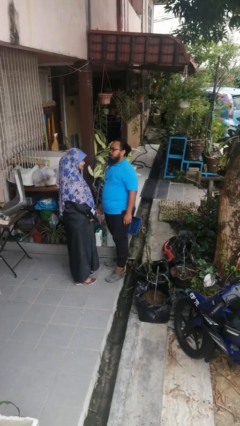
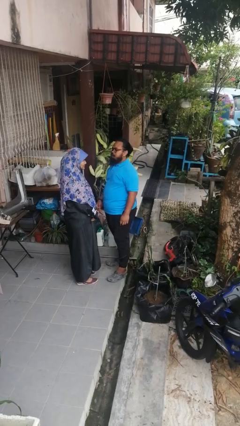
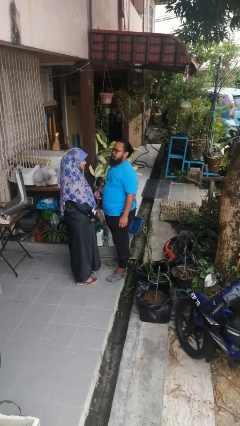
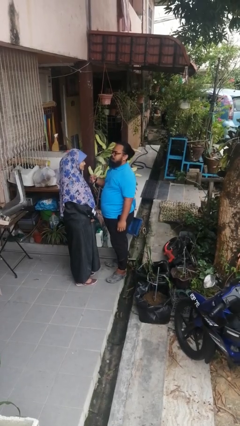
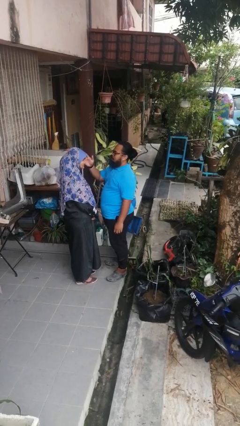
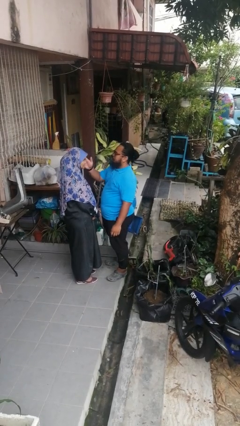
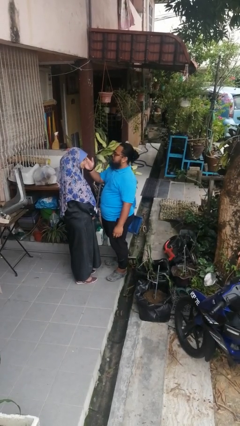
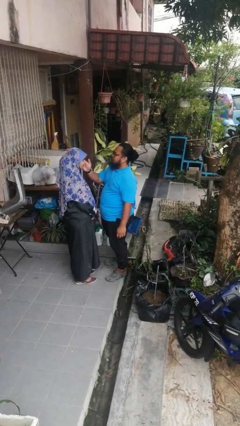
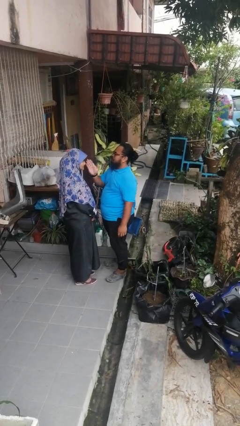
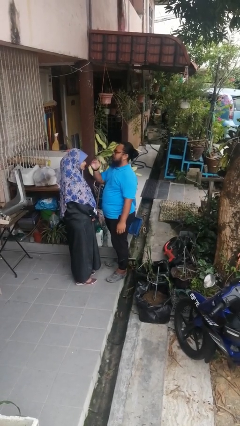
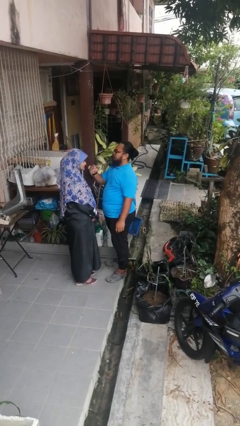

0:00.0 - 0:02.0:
person touches face of person

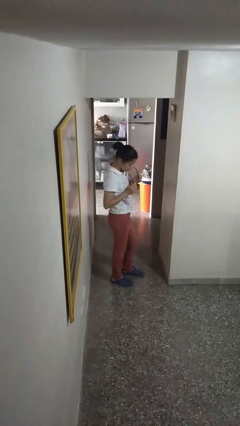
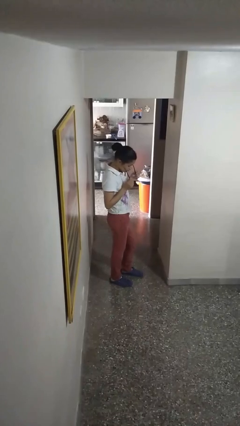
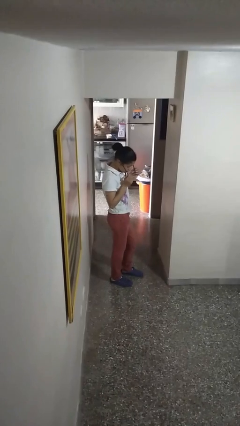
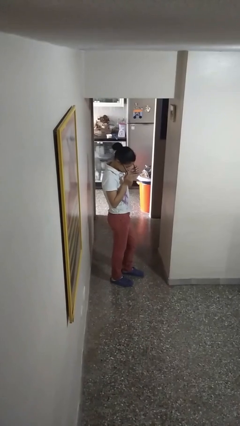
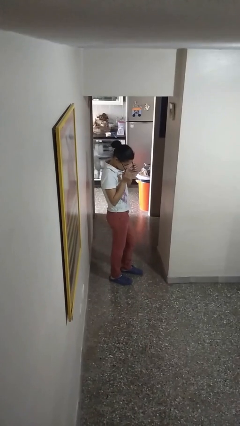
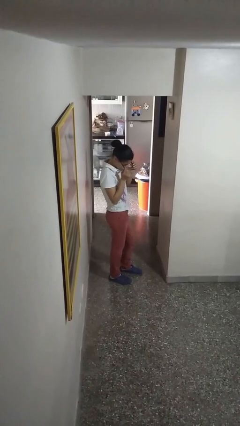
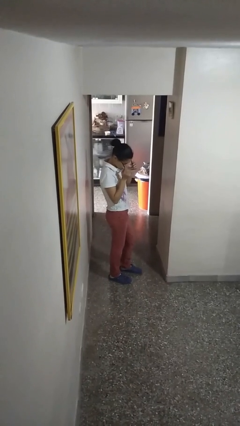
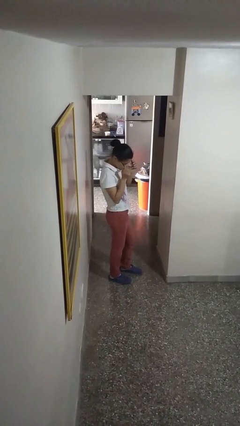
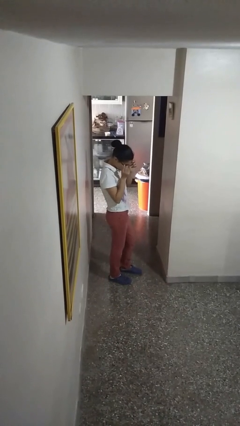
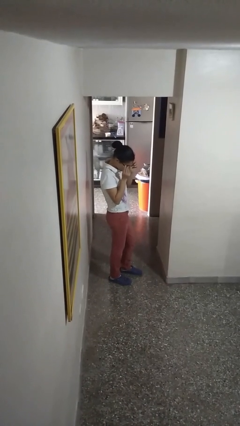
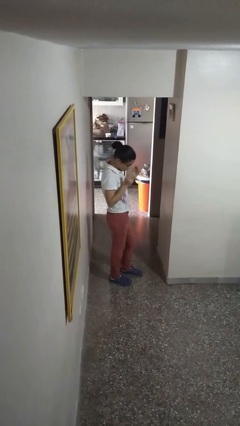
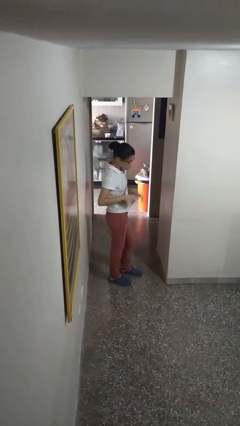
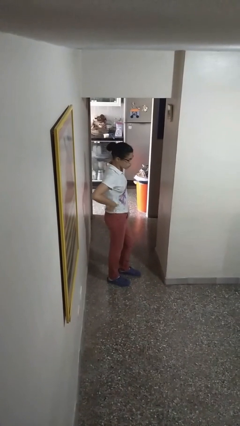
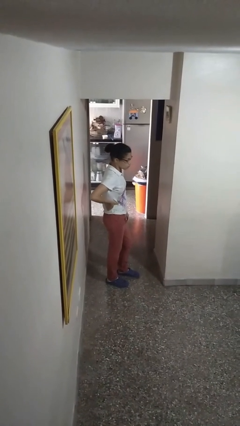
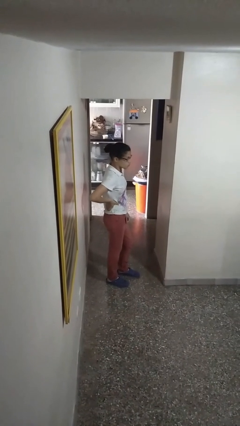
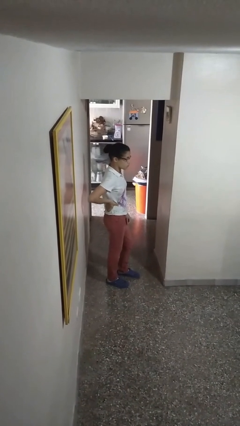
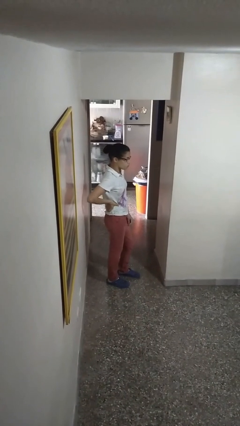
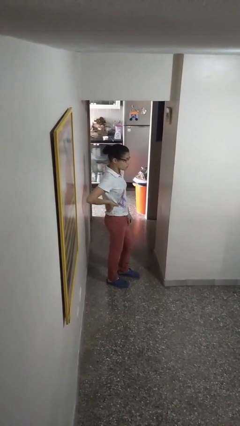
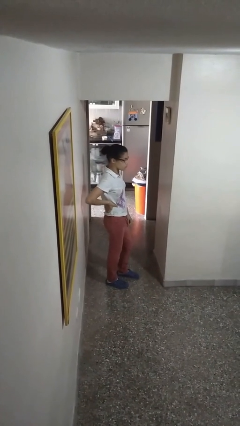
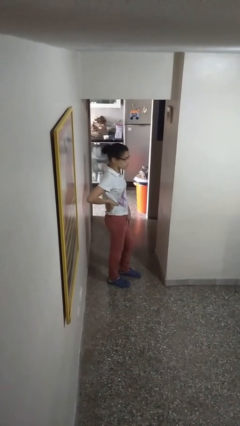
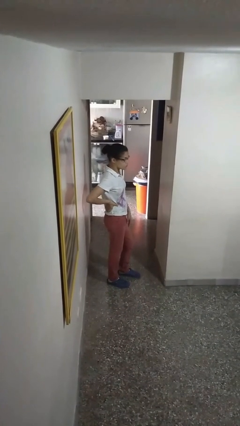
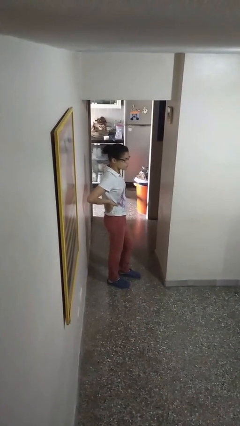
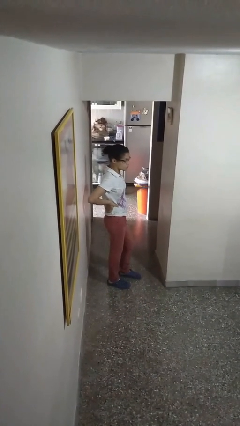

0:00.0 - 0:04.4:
person puts on glasses

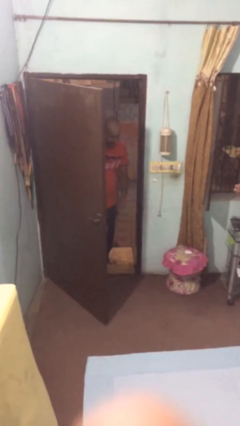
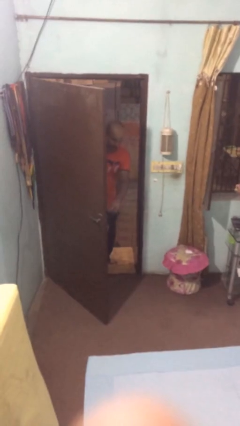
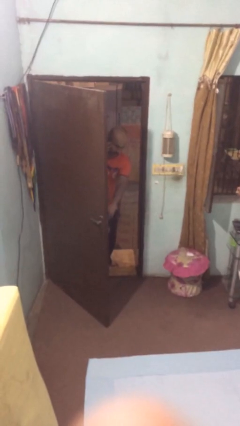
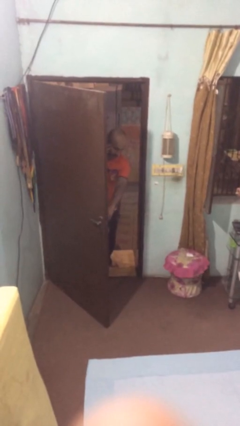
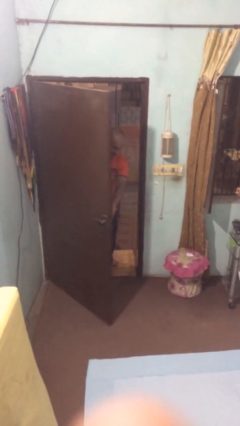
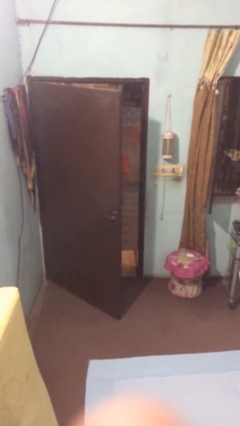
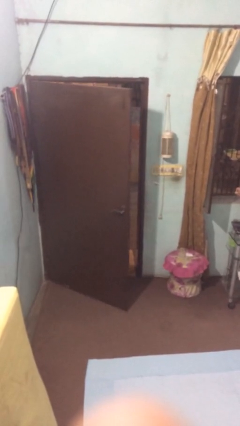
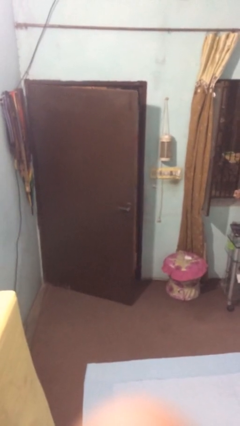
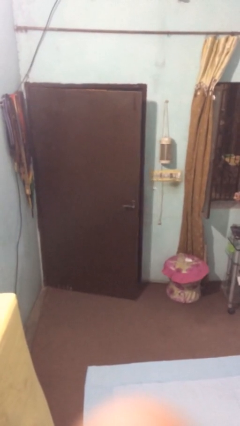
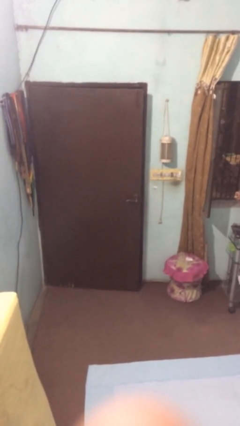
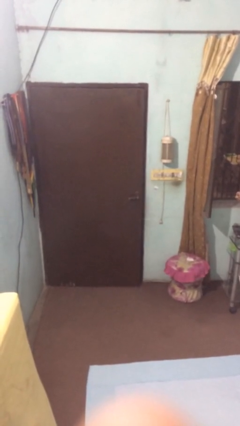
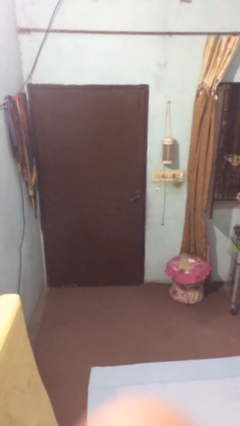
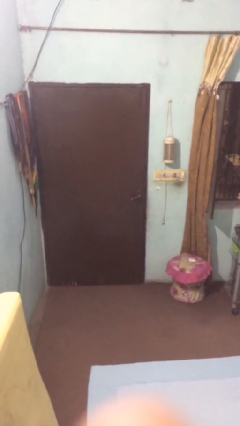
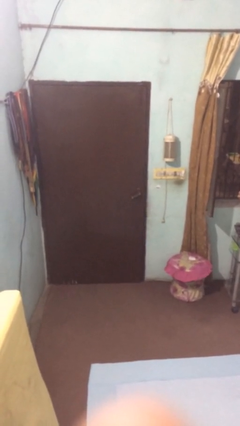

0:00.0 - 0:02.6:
person closes facility door

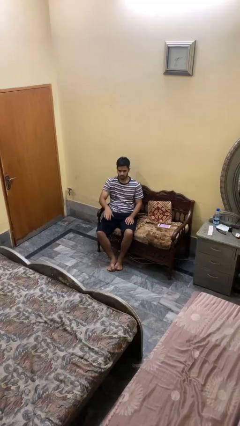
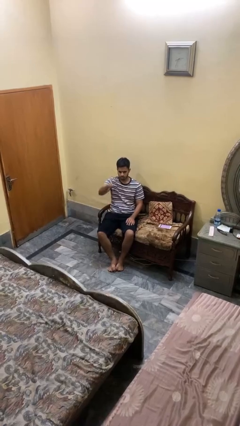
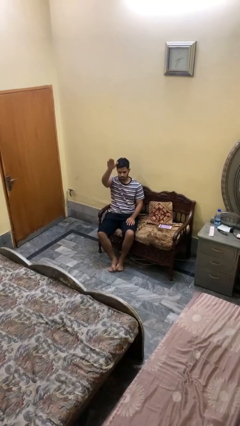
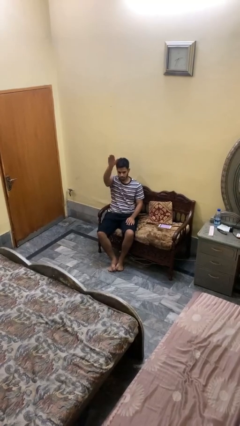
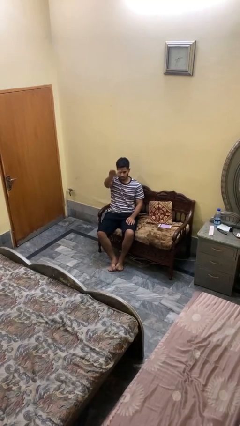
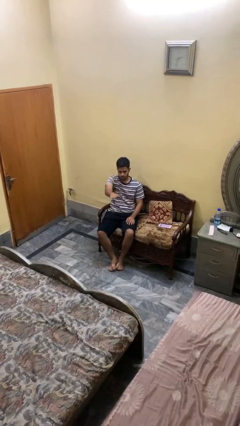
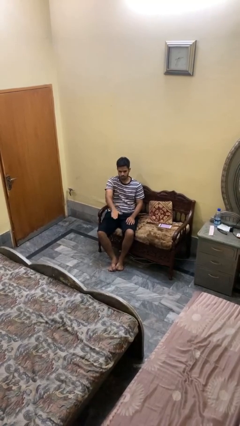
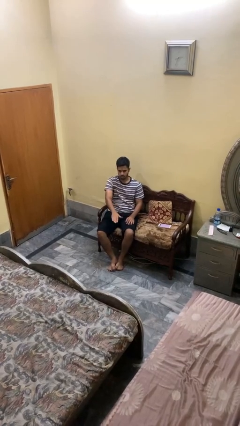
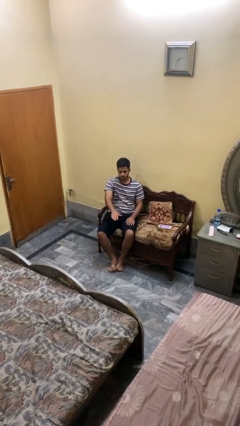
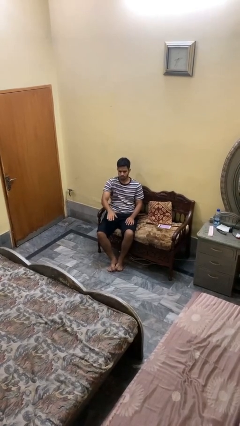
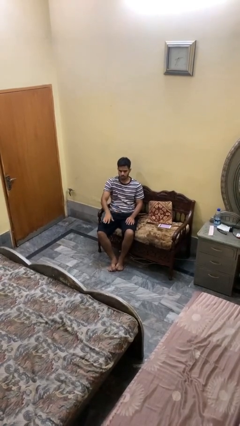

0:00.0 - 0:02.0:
person gestures swipe down

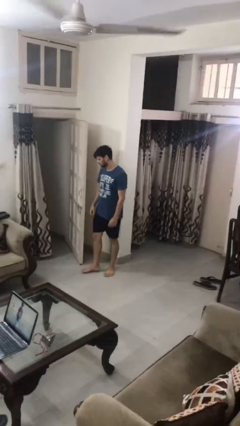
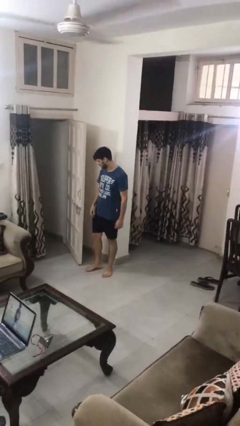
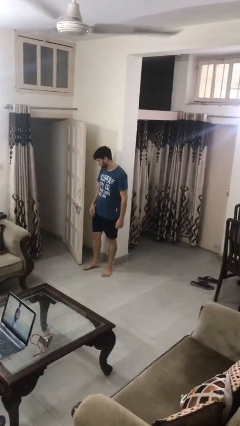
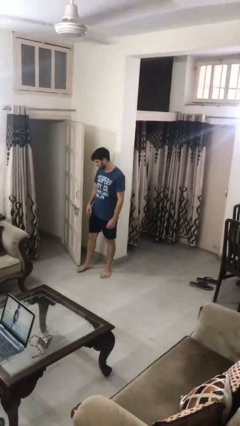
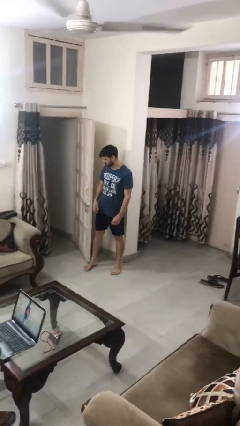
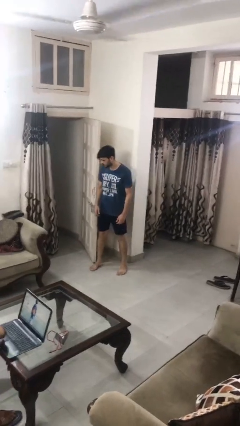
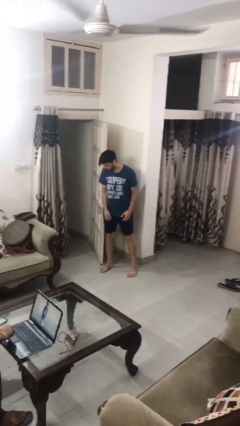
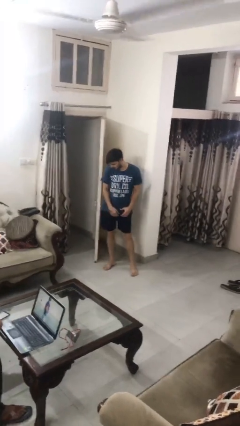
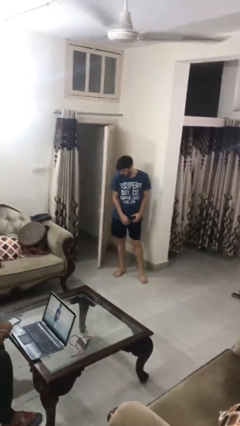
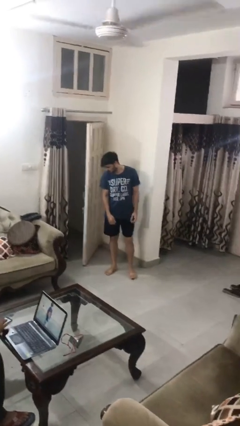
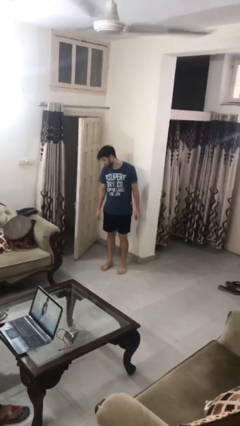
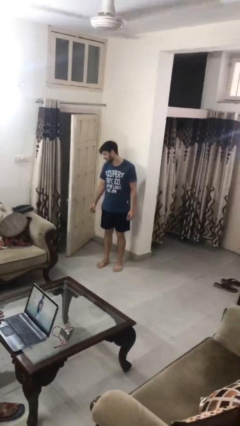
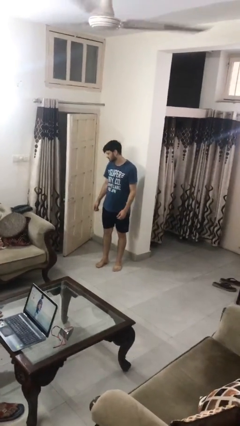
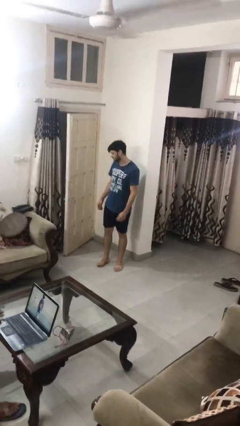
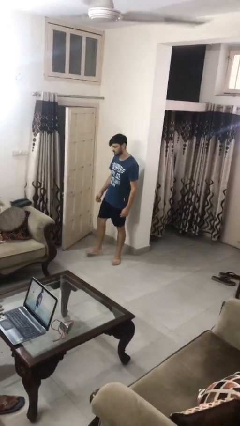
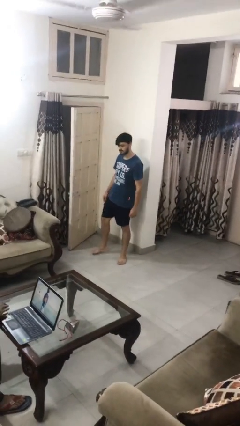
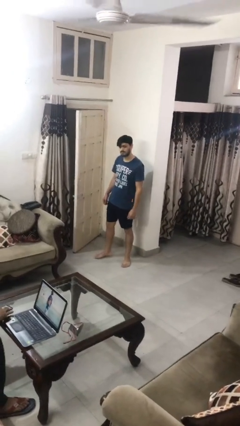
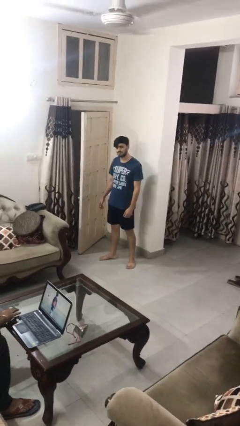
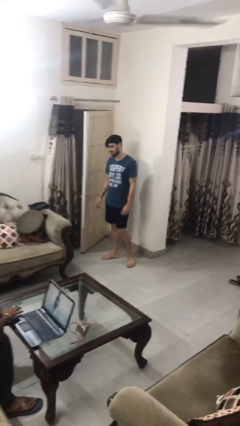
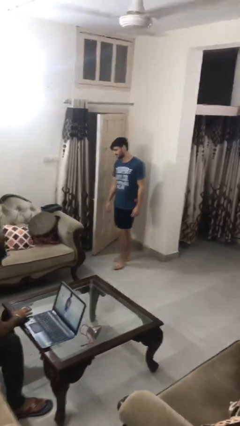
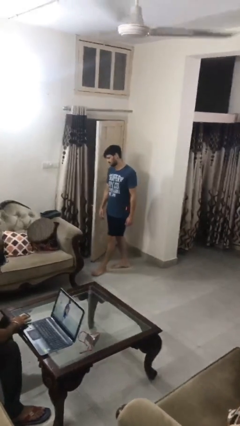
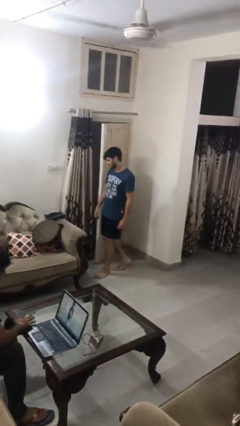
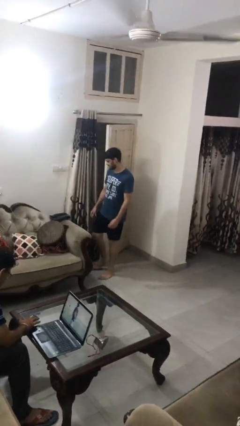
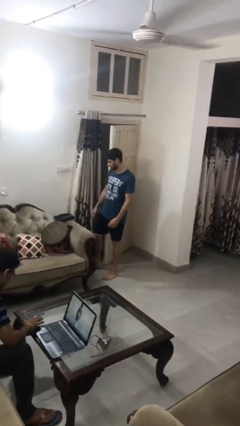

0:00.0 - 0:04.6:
person closes door with hip

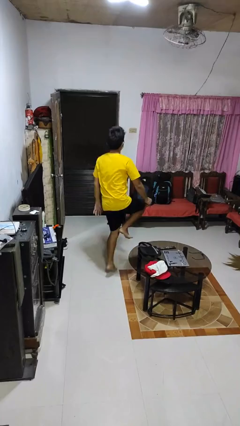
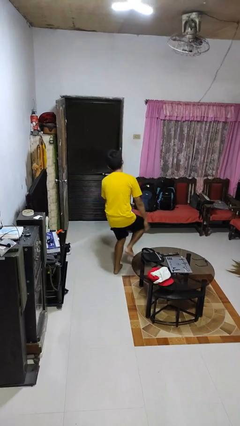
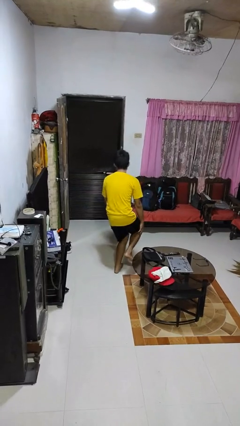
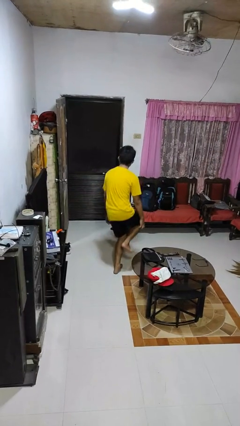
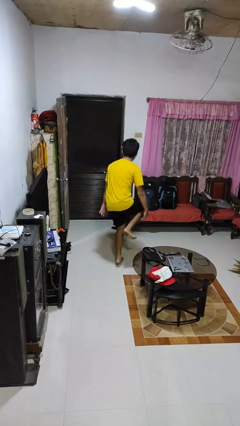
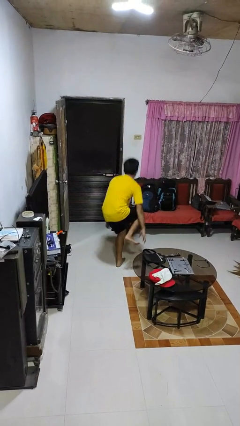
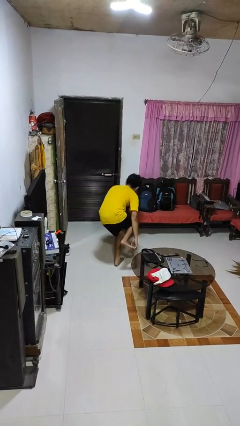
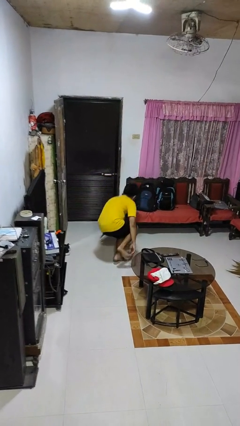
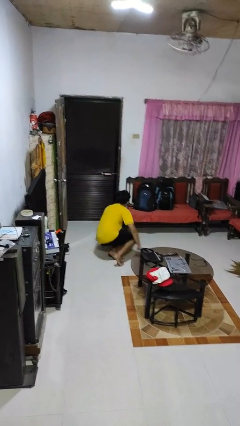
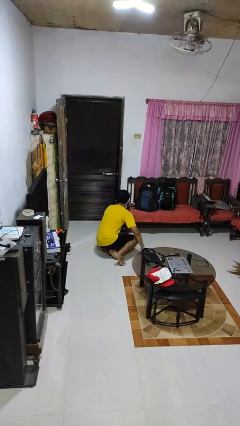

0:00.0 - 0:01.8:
person trips on object on floor
